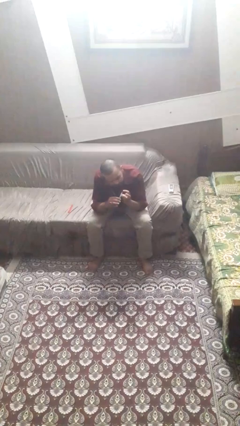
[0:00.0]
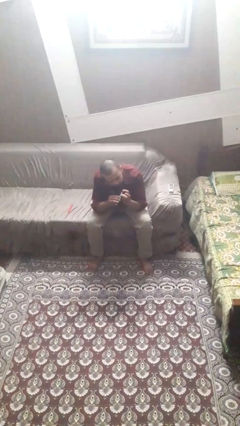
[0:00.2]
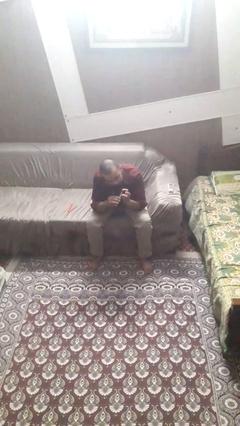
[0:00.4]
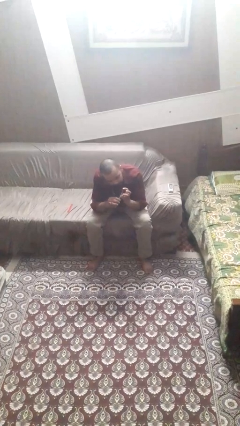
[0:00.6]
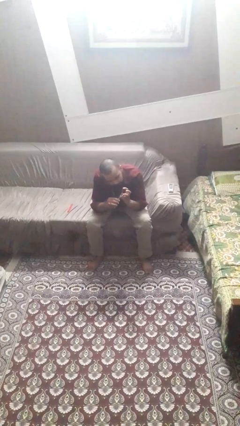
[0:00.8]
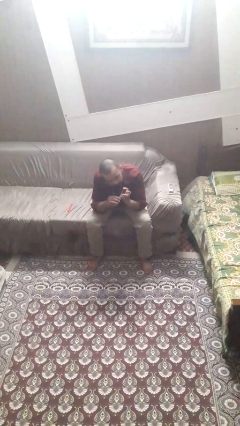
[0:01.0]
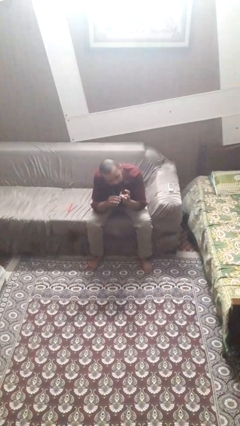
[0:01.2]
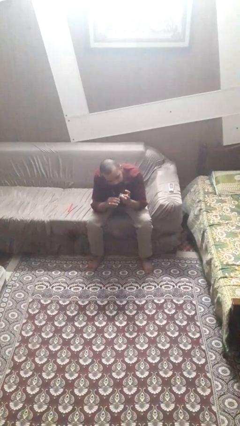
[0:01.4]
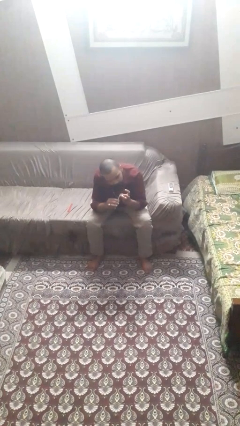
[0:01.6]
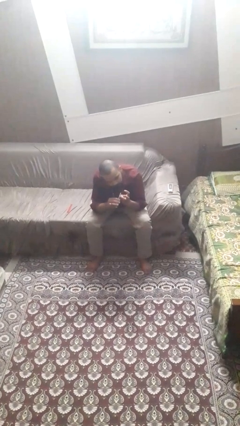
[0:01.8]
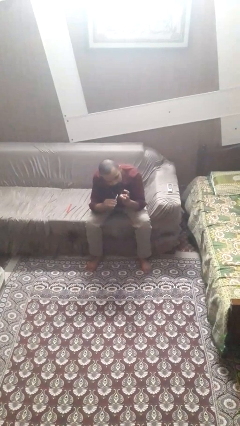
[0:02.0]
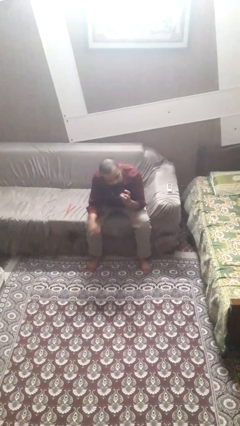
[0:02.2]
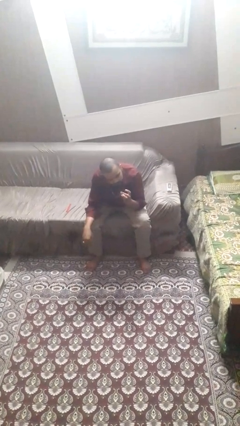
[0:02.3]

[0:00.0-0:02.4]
person files fingernails

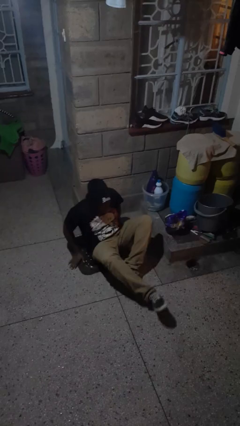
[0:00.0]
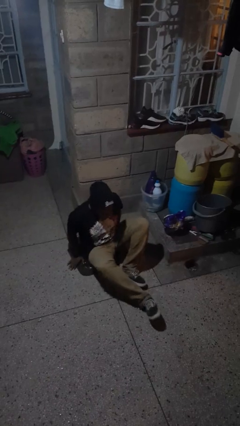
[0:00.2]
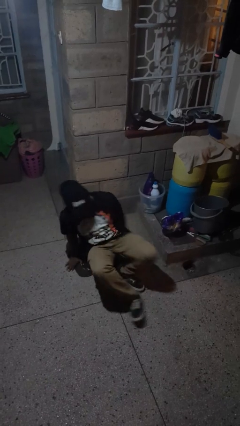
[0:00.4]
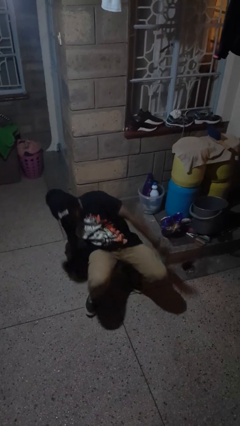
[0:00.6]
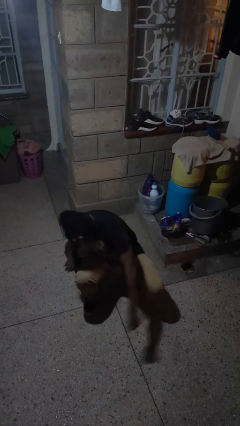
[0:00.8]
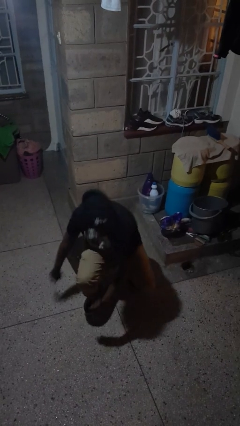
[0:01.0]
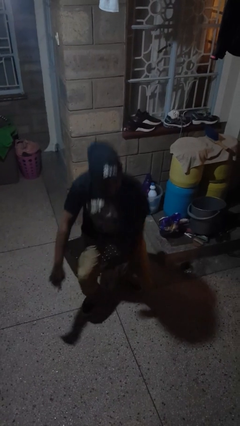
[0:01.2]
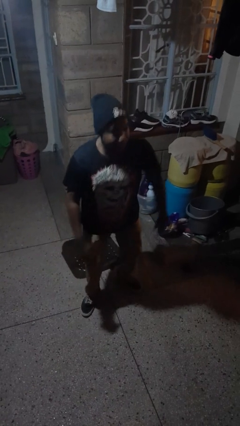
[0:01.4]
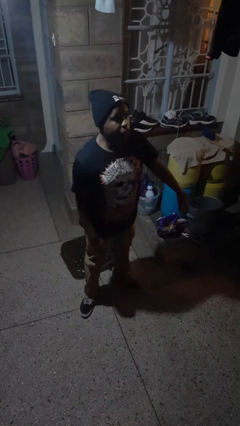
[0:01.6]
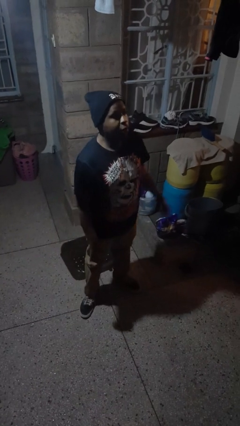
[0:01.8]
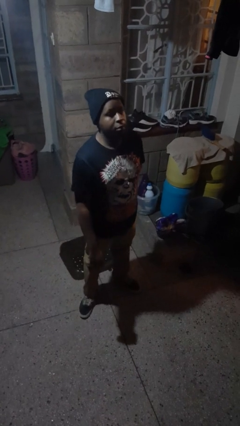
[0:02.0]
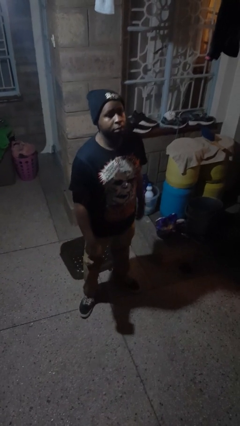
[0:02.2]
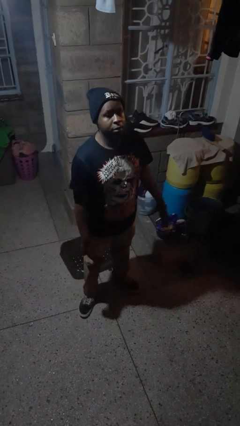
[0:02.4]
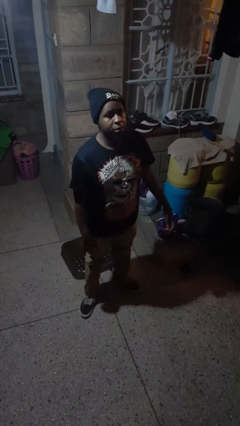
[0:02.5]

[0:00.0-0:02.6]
person stands up from floor

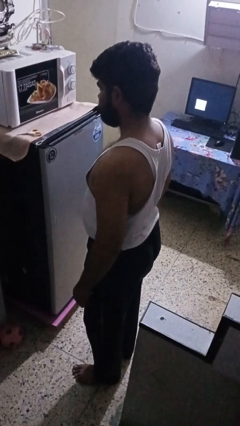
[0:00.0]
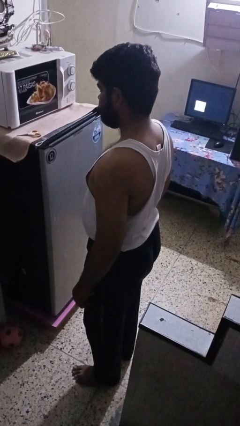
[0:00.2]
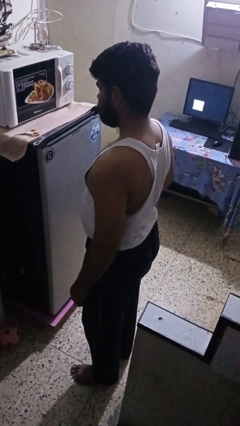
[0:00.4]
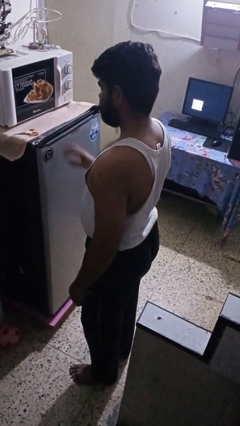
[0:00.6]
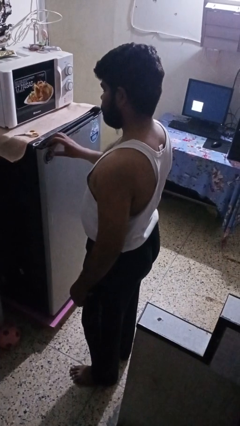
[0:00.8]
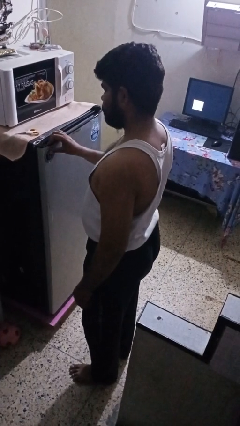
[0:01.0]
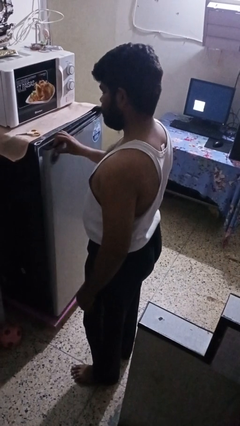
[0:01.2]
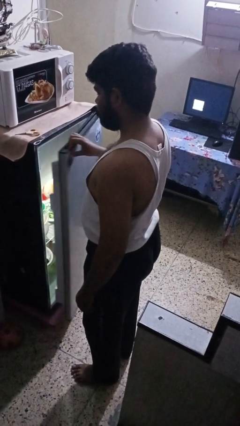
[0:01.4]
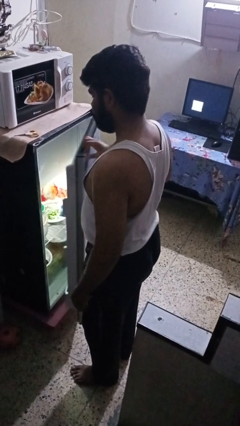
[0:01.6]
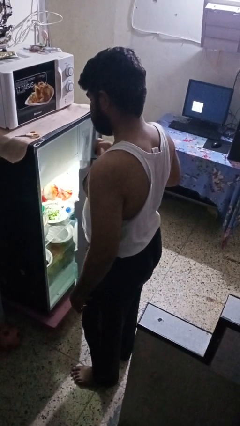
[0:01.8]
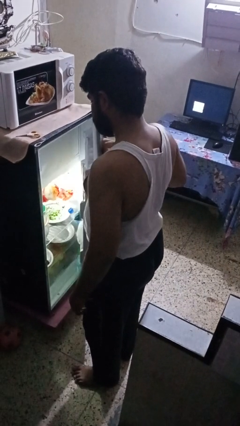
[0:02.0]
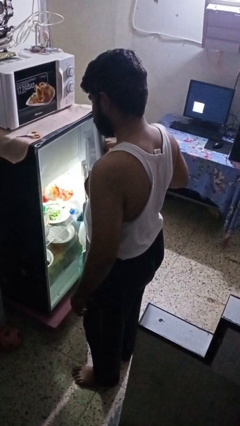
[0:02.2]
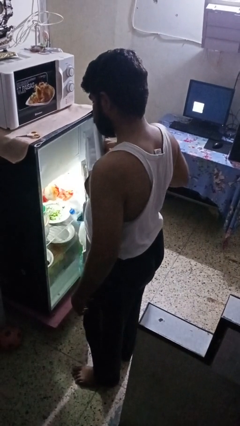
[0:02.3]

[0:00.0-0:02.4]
person opens refrigerator

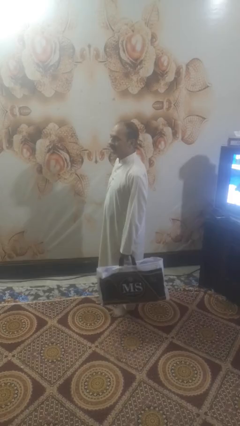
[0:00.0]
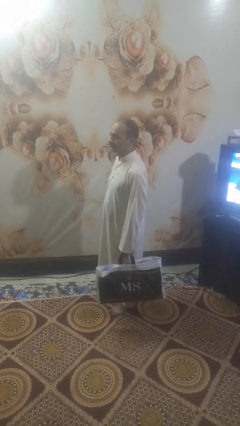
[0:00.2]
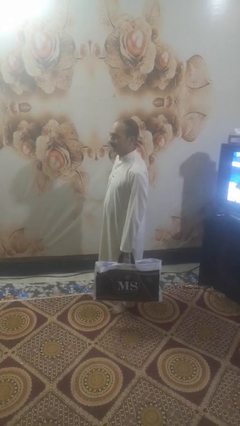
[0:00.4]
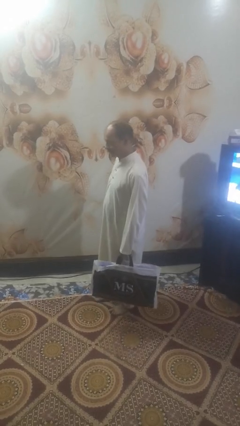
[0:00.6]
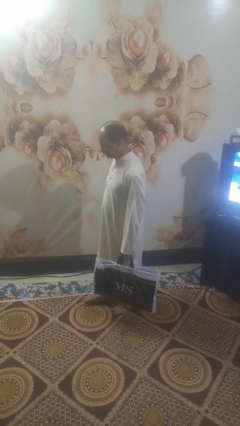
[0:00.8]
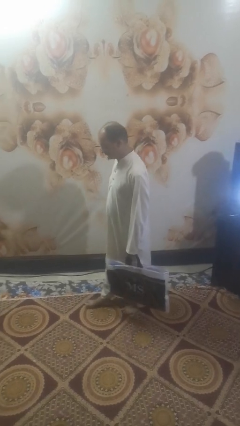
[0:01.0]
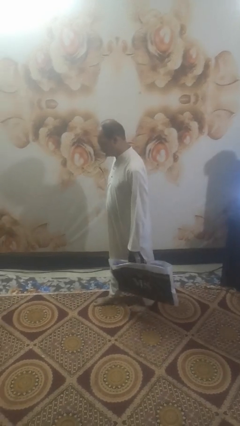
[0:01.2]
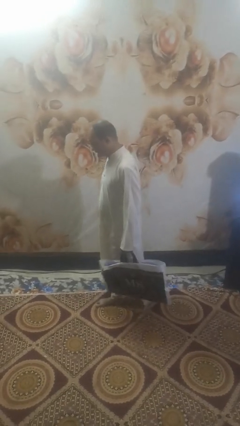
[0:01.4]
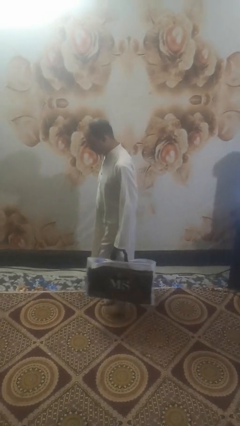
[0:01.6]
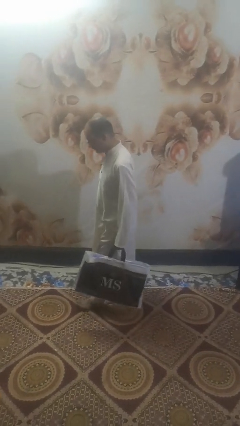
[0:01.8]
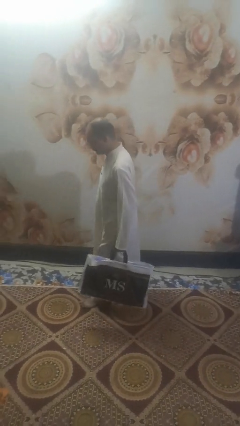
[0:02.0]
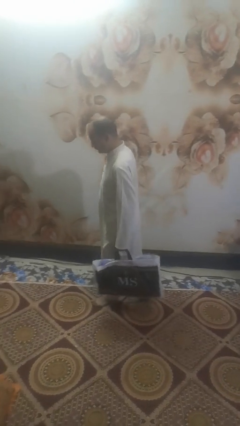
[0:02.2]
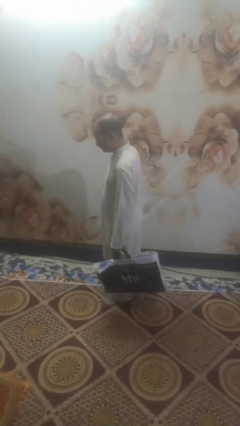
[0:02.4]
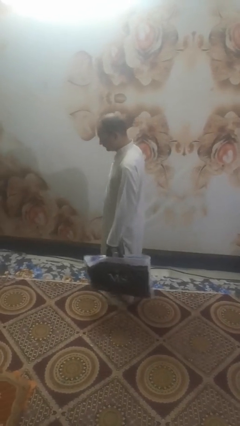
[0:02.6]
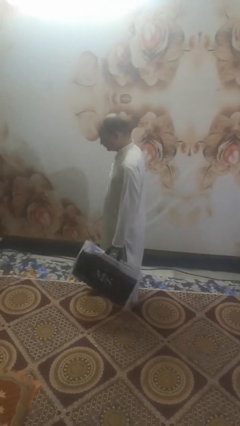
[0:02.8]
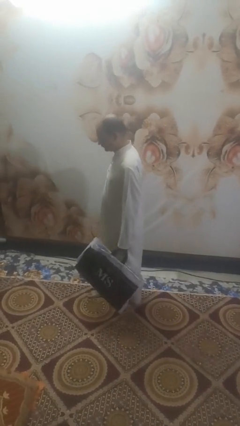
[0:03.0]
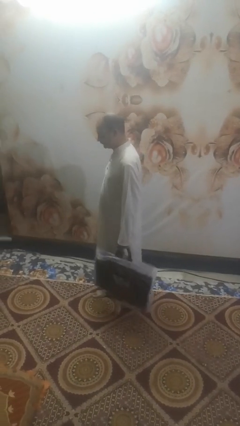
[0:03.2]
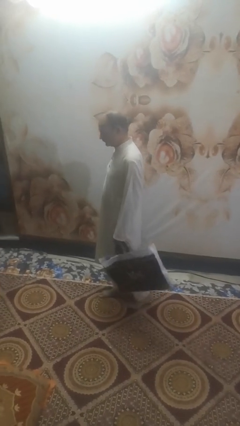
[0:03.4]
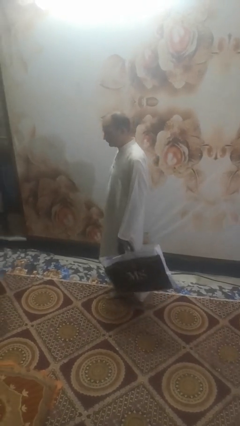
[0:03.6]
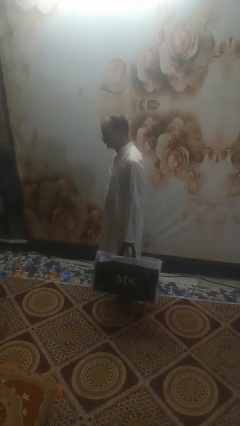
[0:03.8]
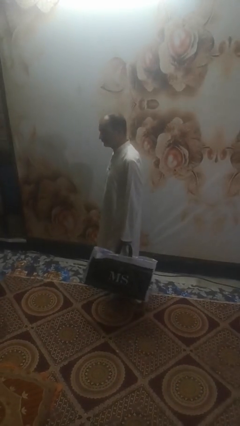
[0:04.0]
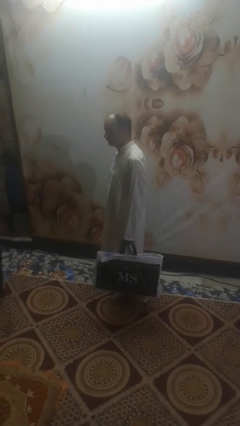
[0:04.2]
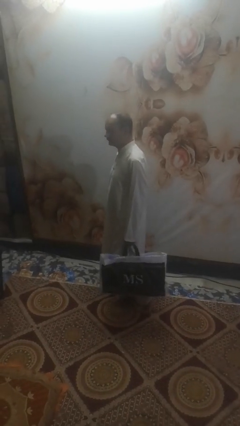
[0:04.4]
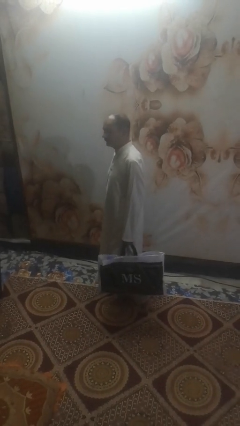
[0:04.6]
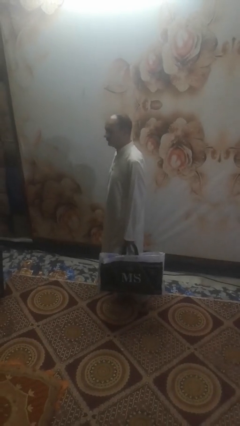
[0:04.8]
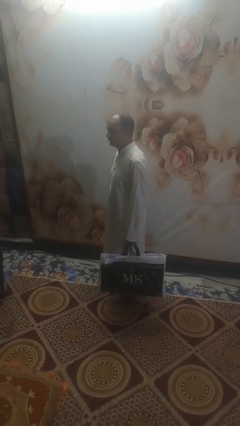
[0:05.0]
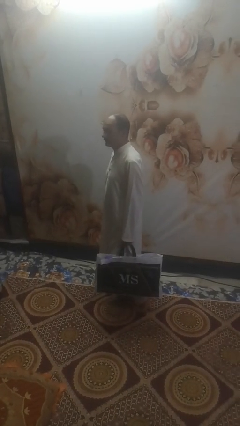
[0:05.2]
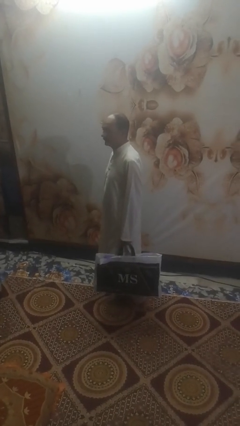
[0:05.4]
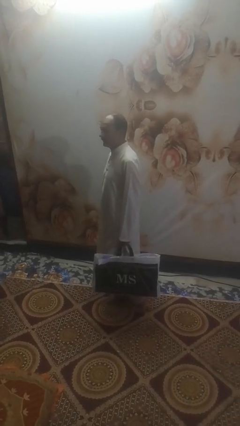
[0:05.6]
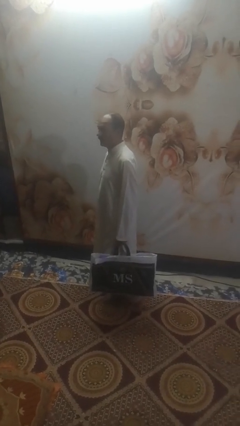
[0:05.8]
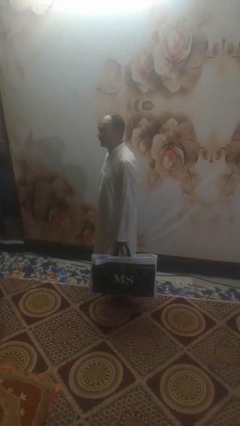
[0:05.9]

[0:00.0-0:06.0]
person carries groceries

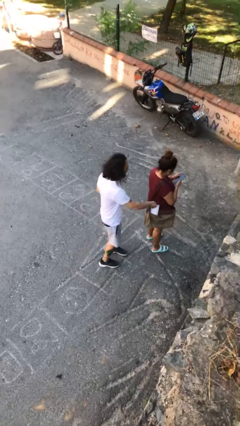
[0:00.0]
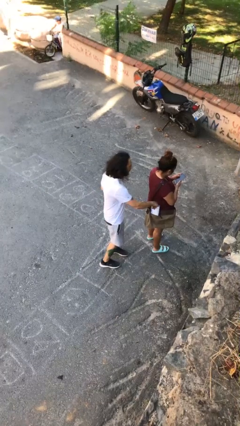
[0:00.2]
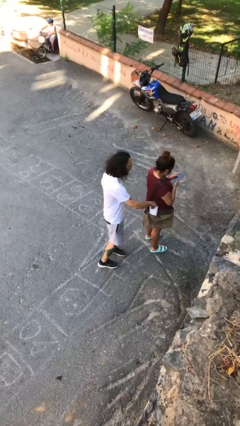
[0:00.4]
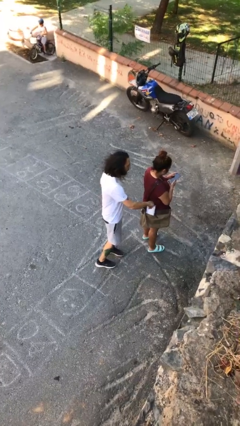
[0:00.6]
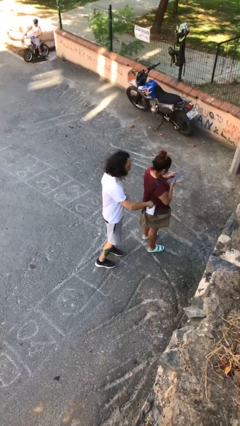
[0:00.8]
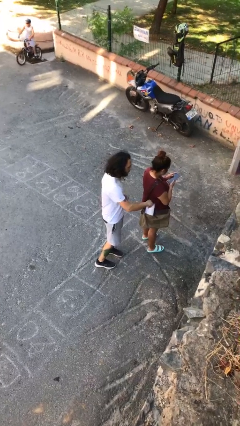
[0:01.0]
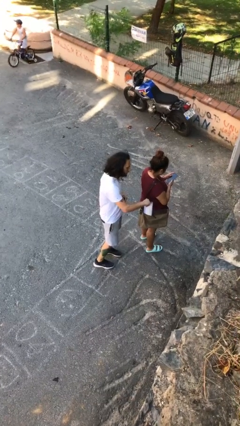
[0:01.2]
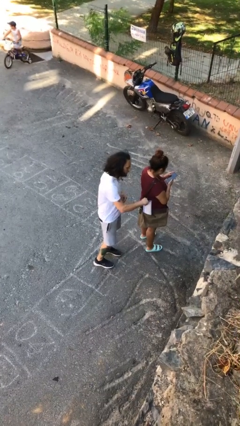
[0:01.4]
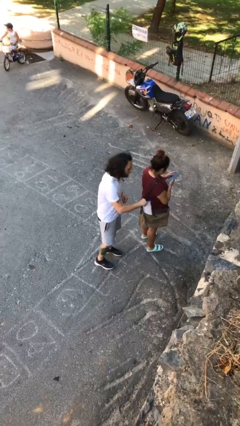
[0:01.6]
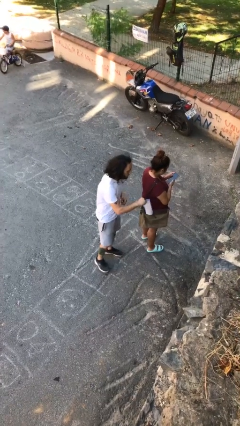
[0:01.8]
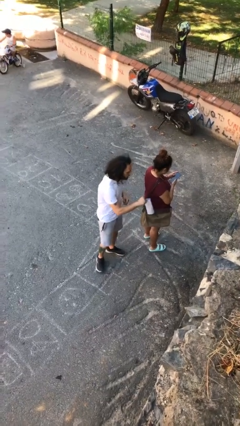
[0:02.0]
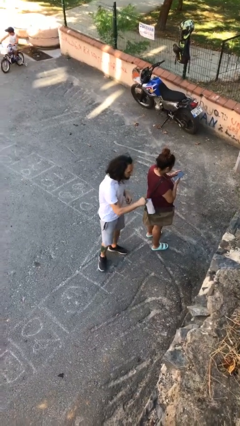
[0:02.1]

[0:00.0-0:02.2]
person steals object from person

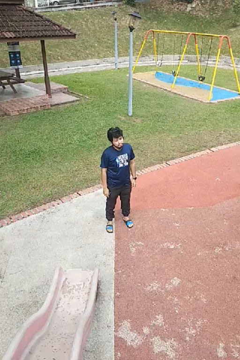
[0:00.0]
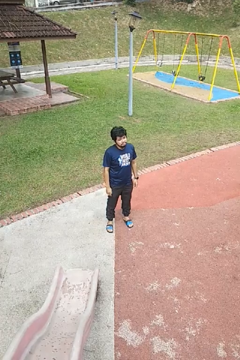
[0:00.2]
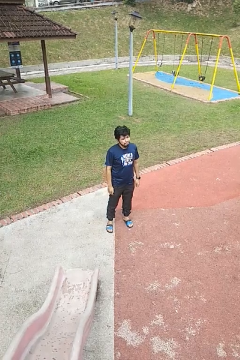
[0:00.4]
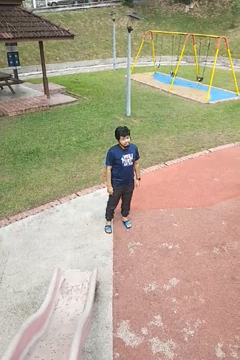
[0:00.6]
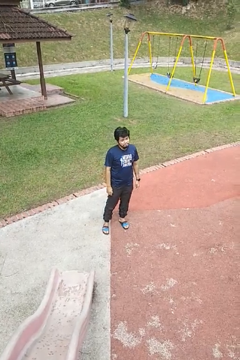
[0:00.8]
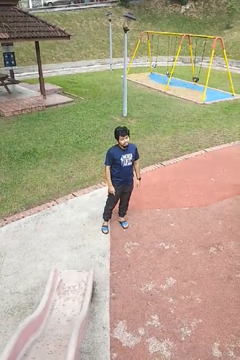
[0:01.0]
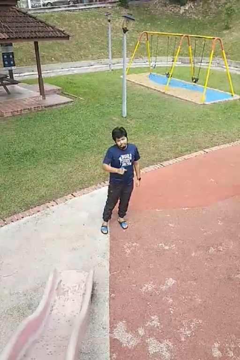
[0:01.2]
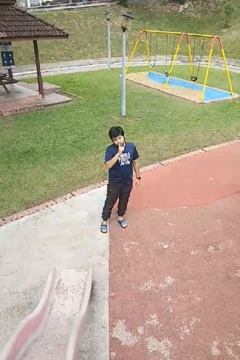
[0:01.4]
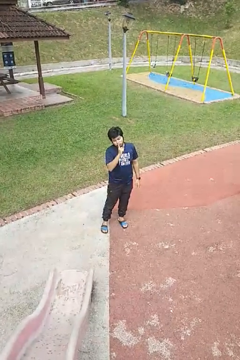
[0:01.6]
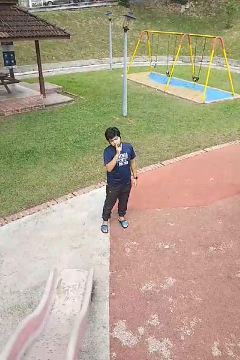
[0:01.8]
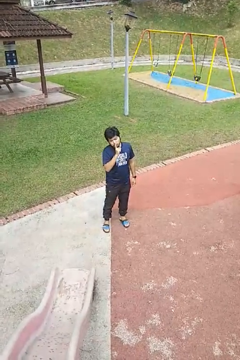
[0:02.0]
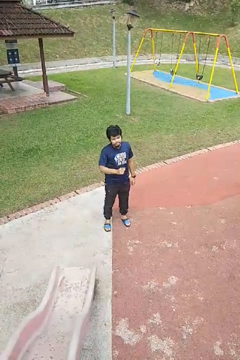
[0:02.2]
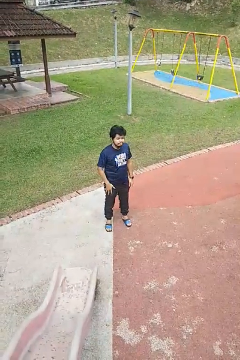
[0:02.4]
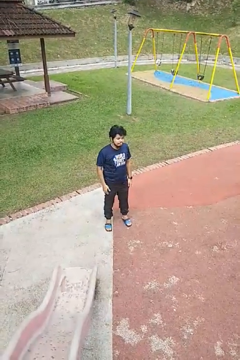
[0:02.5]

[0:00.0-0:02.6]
person gestures be quiet
